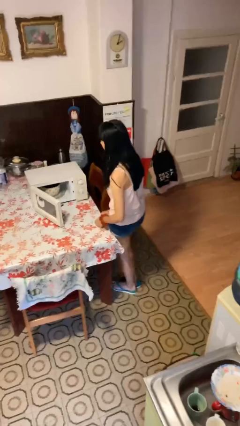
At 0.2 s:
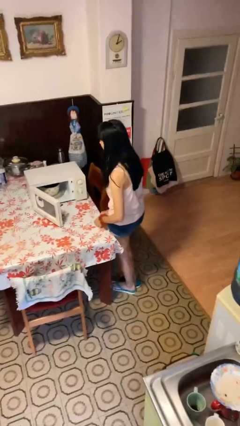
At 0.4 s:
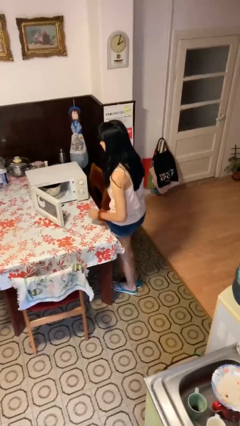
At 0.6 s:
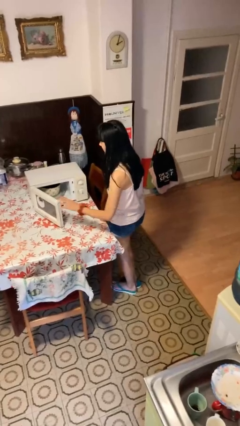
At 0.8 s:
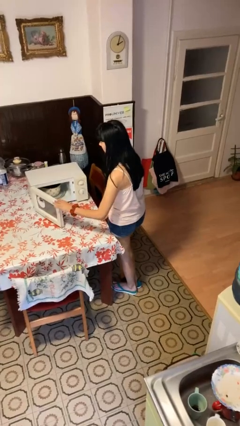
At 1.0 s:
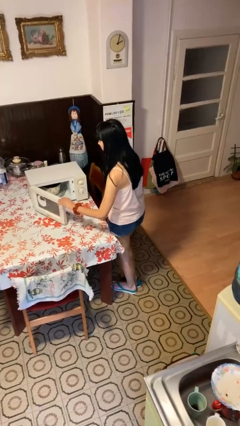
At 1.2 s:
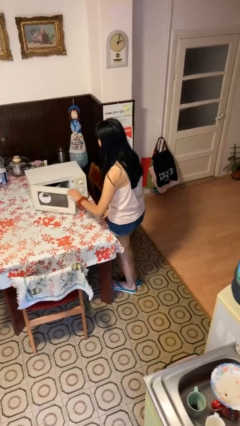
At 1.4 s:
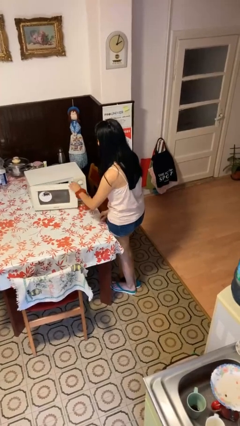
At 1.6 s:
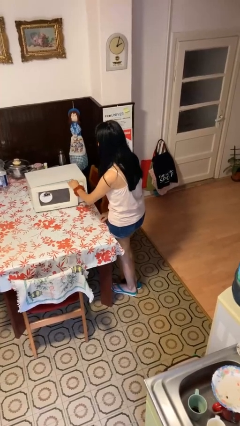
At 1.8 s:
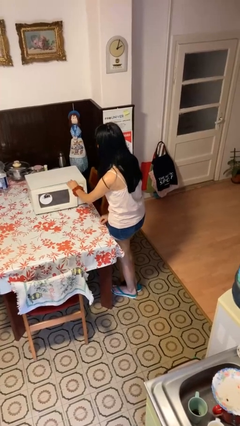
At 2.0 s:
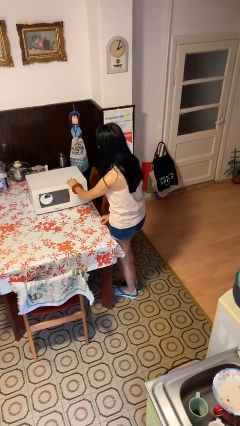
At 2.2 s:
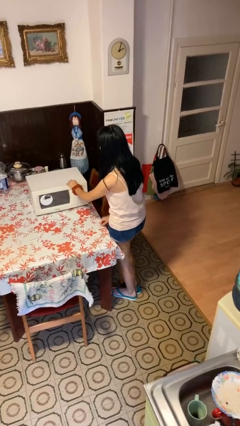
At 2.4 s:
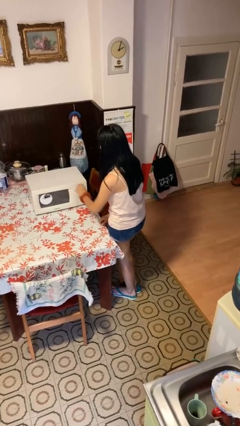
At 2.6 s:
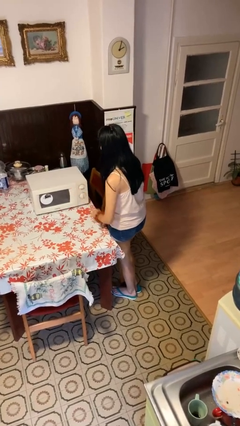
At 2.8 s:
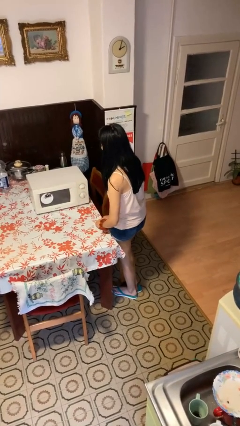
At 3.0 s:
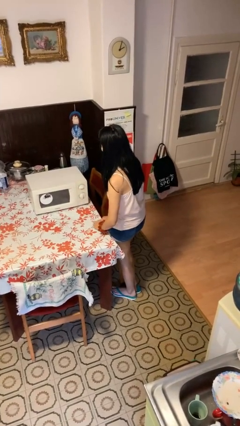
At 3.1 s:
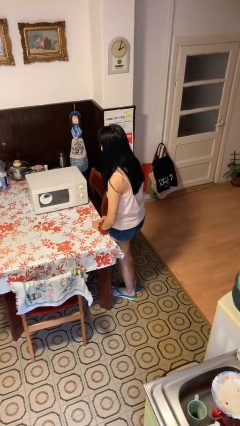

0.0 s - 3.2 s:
person closes microwave

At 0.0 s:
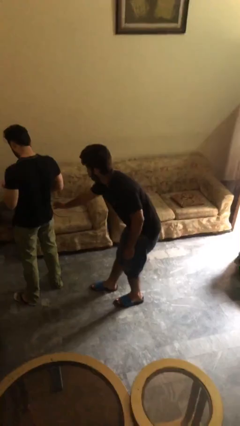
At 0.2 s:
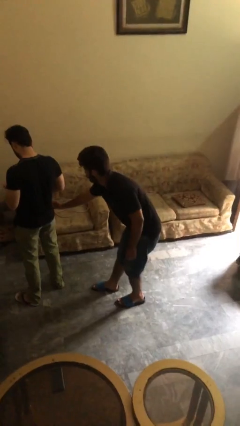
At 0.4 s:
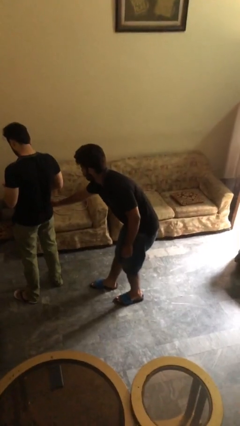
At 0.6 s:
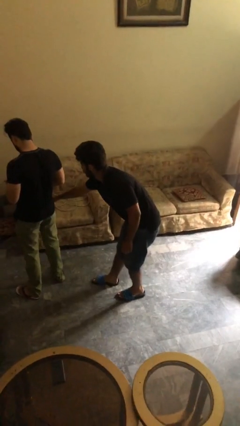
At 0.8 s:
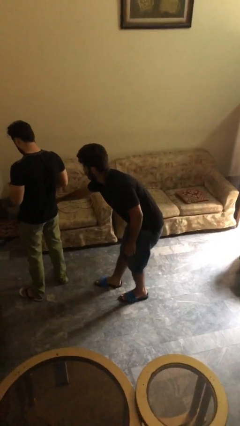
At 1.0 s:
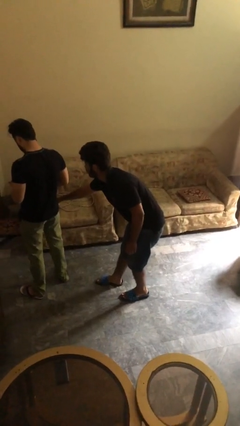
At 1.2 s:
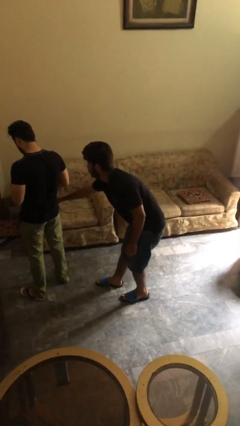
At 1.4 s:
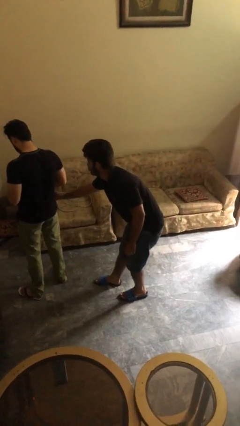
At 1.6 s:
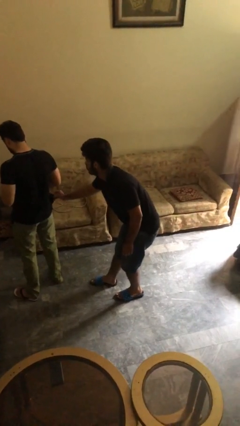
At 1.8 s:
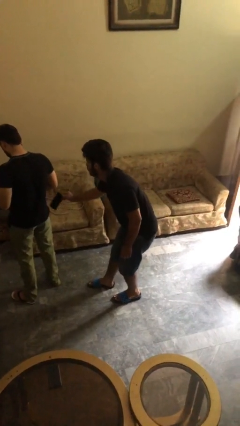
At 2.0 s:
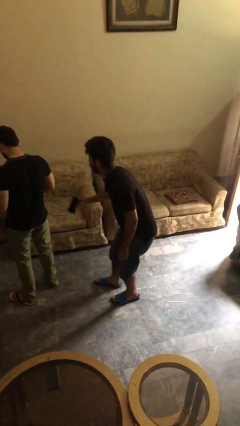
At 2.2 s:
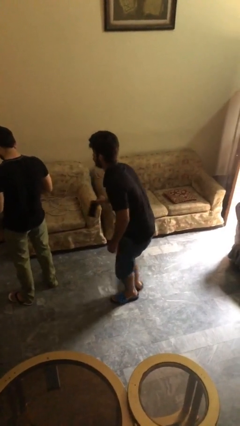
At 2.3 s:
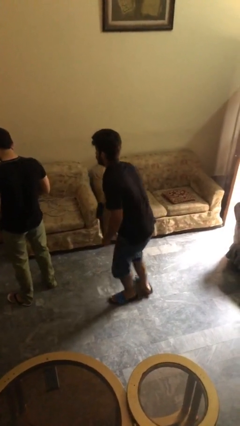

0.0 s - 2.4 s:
person steals object from person

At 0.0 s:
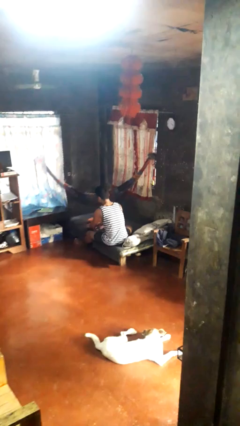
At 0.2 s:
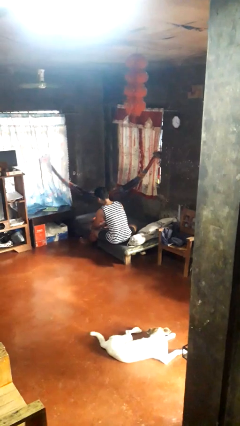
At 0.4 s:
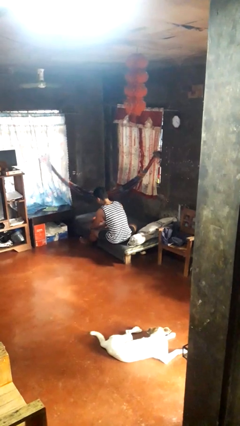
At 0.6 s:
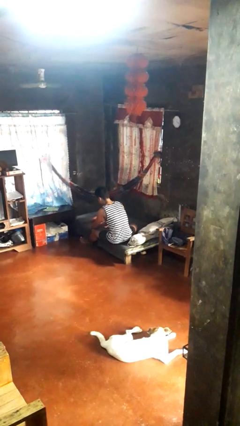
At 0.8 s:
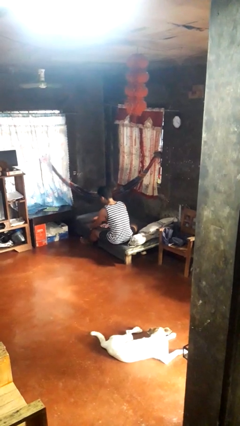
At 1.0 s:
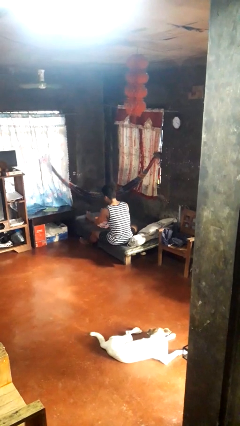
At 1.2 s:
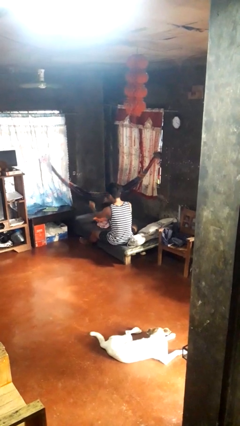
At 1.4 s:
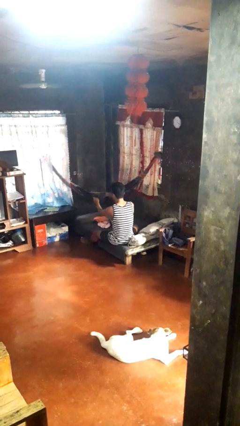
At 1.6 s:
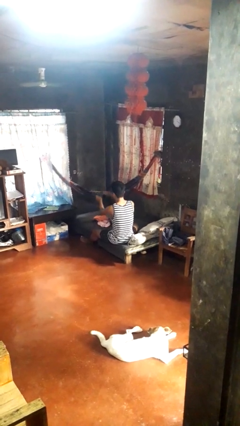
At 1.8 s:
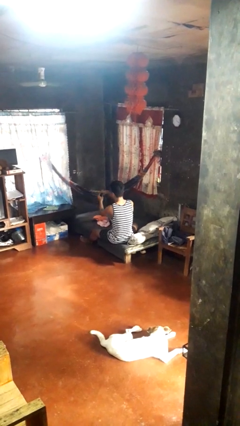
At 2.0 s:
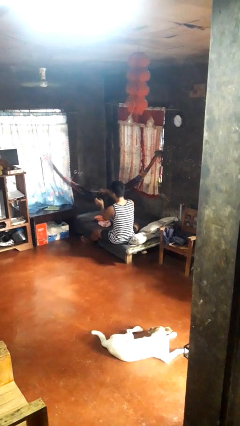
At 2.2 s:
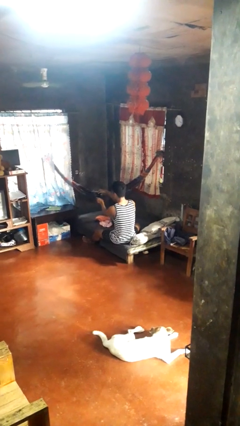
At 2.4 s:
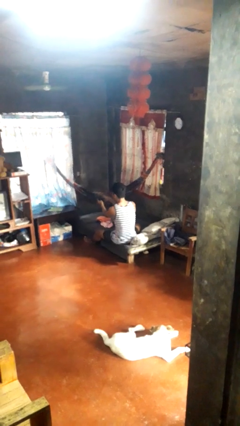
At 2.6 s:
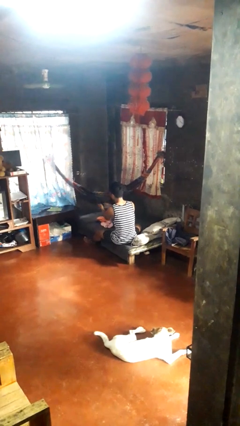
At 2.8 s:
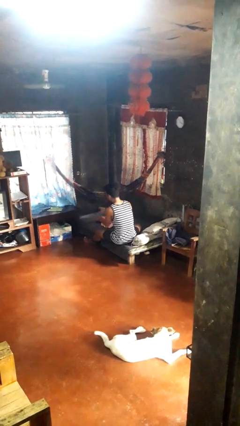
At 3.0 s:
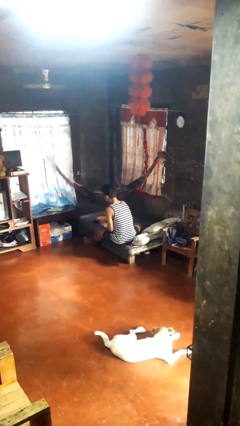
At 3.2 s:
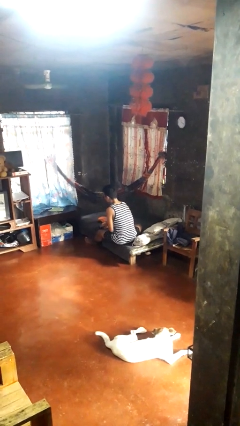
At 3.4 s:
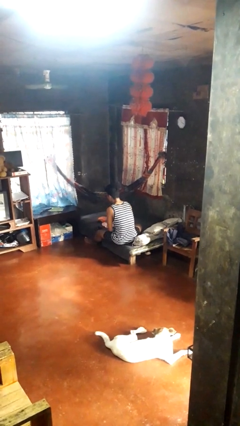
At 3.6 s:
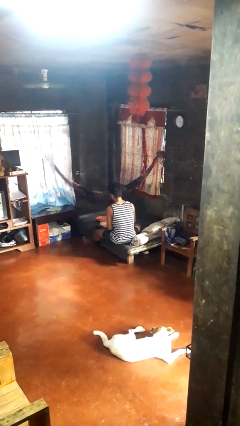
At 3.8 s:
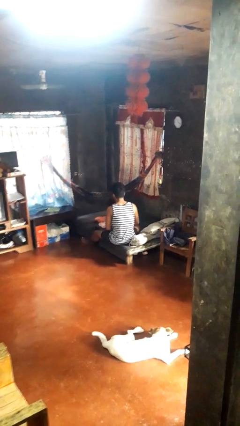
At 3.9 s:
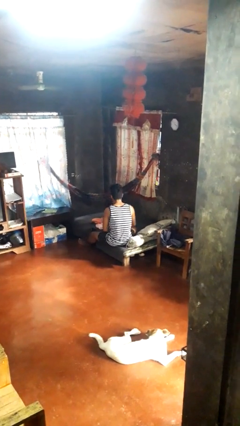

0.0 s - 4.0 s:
person folds socks

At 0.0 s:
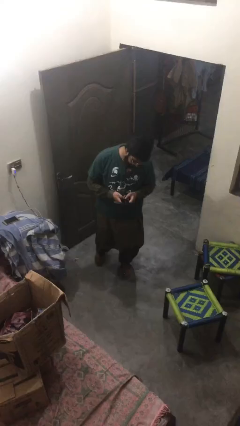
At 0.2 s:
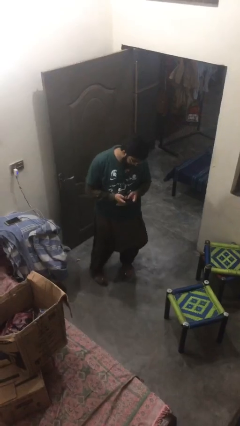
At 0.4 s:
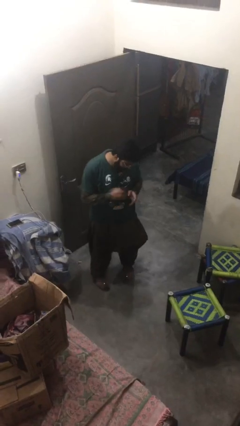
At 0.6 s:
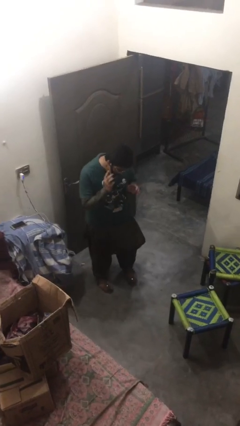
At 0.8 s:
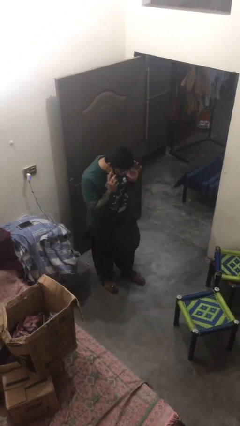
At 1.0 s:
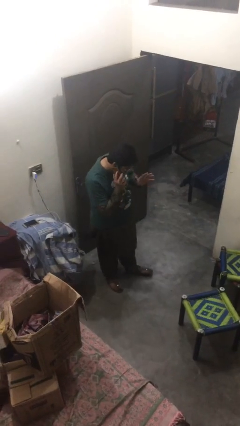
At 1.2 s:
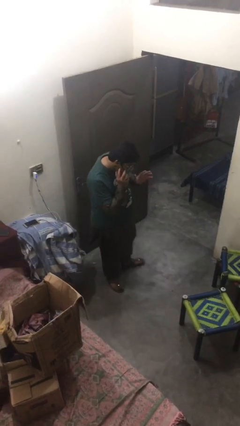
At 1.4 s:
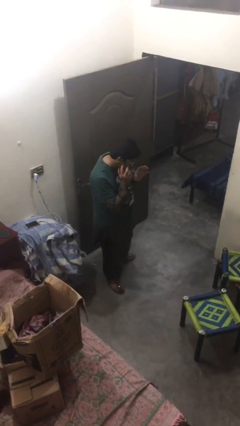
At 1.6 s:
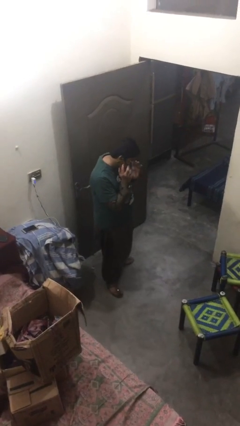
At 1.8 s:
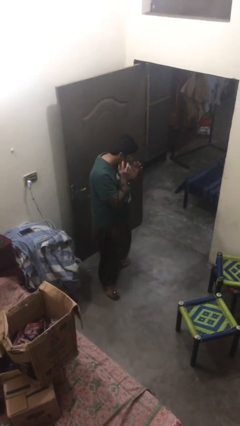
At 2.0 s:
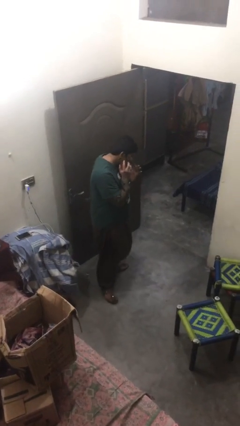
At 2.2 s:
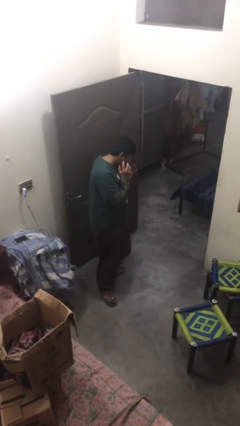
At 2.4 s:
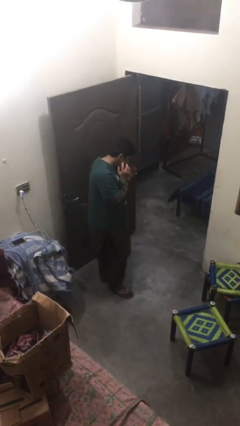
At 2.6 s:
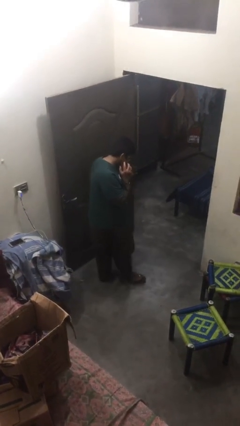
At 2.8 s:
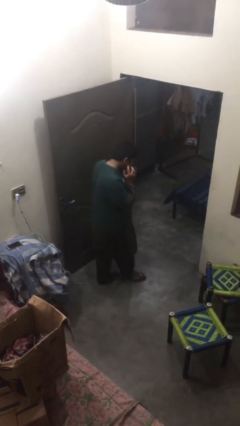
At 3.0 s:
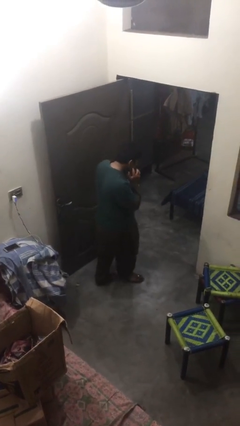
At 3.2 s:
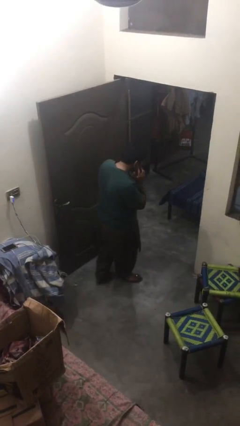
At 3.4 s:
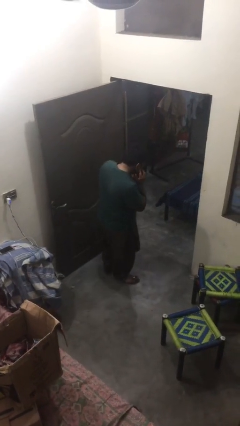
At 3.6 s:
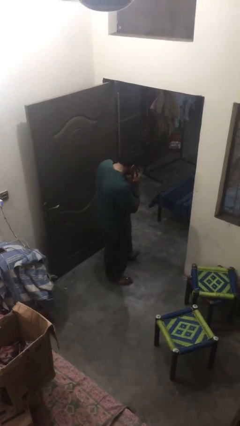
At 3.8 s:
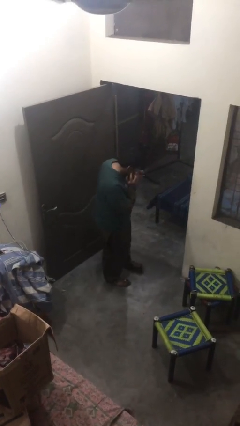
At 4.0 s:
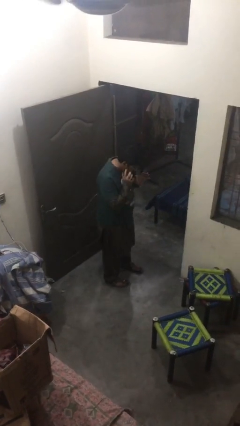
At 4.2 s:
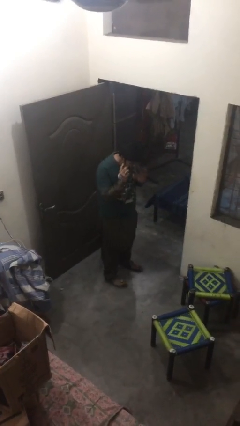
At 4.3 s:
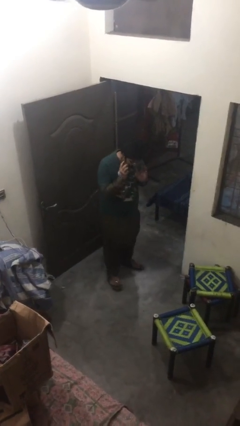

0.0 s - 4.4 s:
person talks on phone

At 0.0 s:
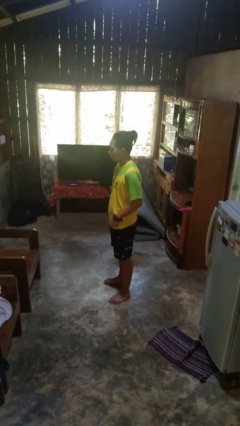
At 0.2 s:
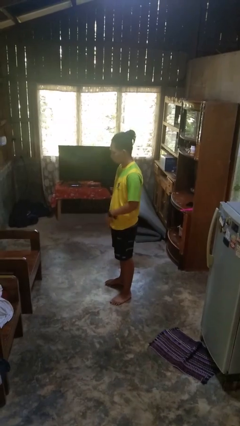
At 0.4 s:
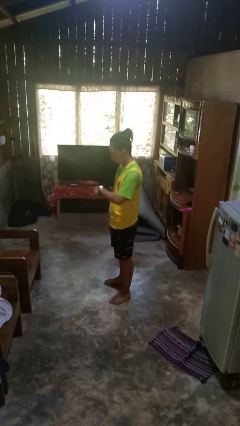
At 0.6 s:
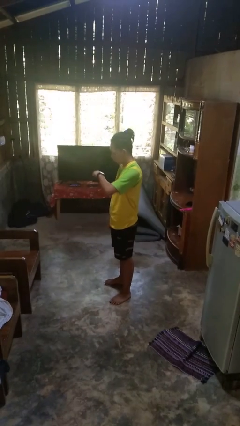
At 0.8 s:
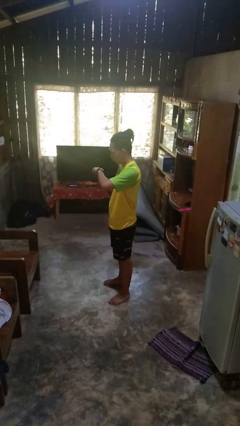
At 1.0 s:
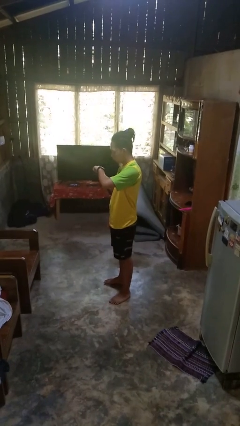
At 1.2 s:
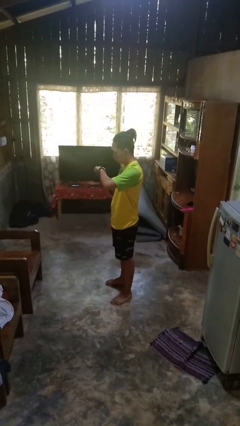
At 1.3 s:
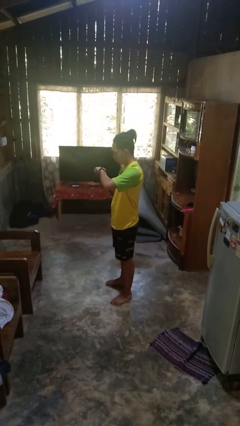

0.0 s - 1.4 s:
person looks at wristwatch

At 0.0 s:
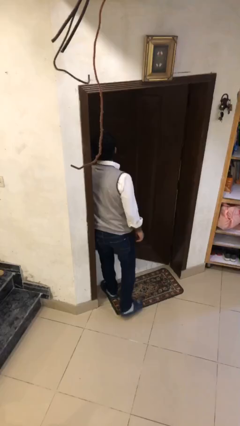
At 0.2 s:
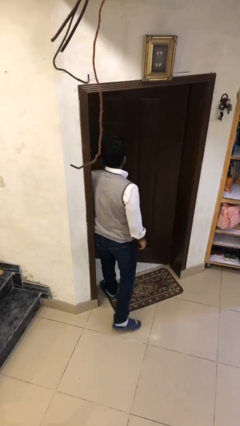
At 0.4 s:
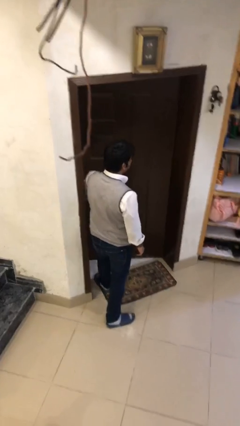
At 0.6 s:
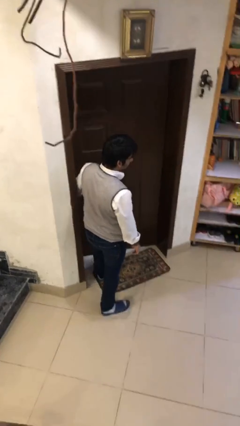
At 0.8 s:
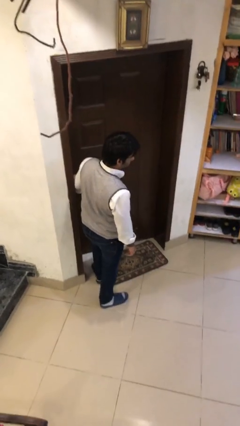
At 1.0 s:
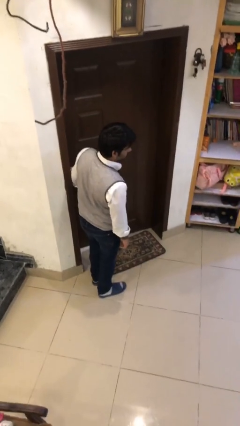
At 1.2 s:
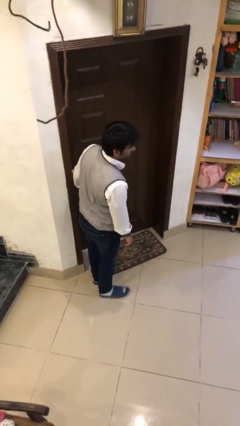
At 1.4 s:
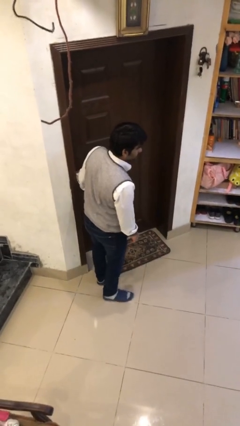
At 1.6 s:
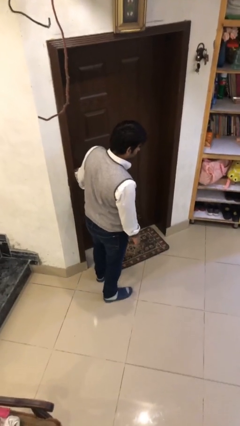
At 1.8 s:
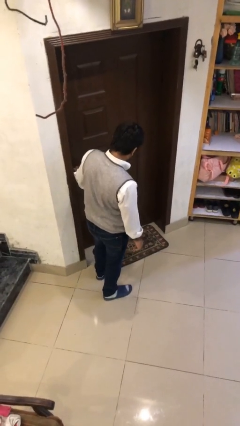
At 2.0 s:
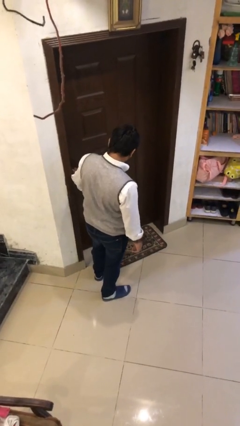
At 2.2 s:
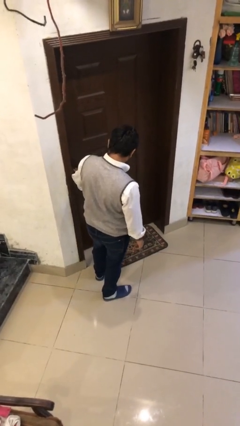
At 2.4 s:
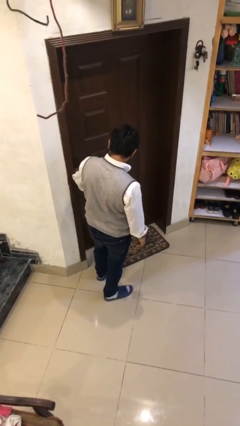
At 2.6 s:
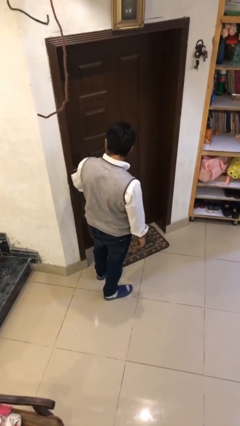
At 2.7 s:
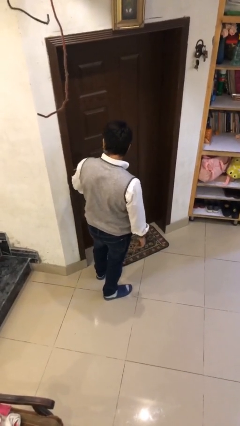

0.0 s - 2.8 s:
person closes facility door
